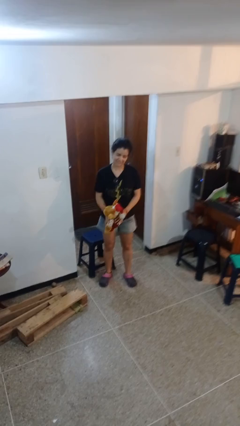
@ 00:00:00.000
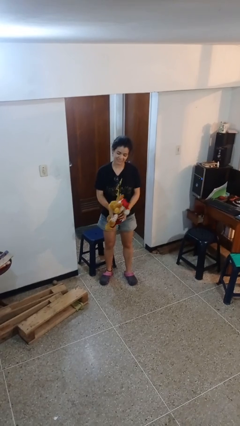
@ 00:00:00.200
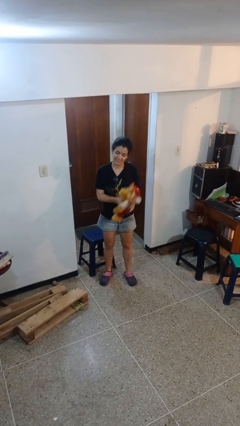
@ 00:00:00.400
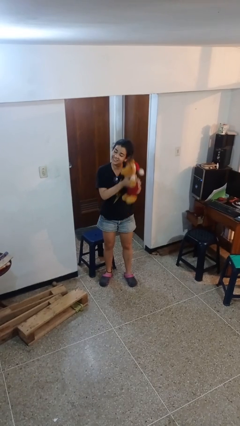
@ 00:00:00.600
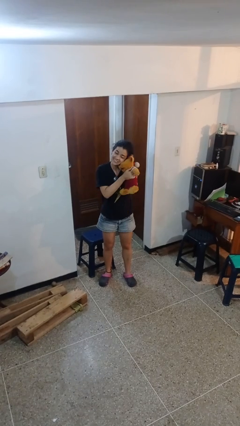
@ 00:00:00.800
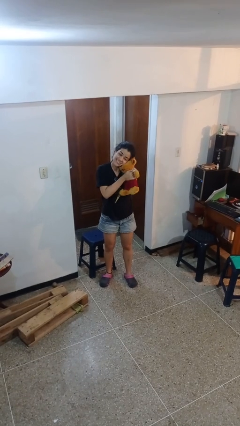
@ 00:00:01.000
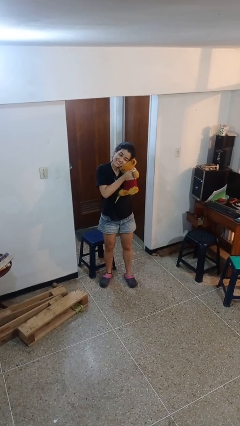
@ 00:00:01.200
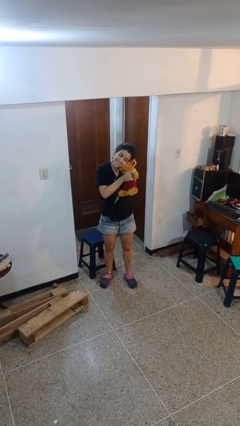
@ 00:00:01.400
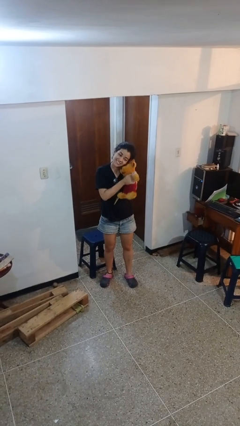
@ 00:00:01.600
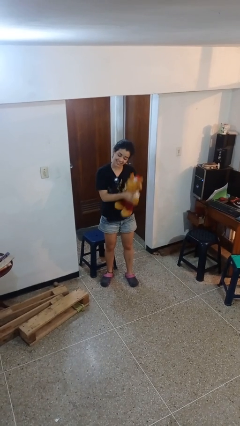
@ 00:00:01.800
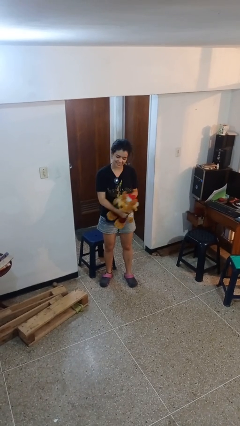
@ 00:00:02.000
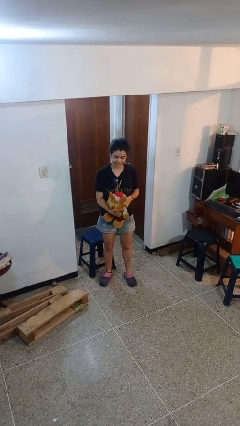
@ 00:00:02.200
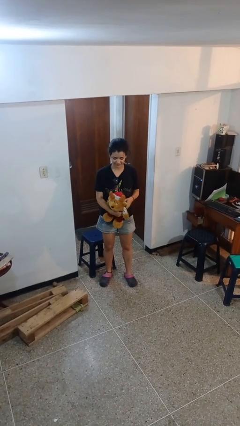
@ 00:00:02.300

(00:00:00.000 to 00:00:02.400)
person hugs stuffed animal

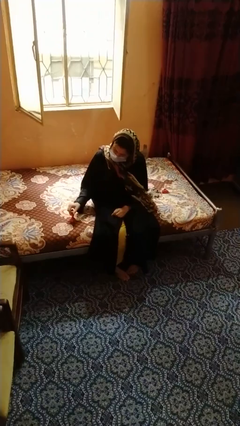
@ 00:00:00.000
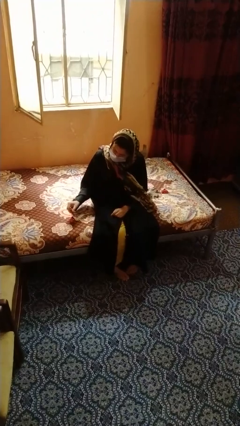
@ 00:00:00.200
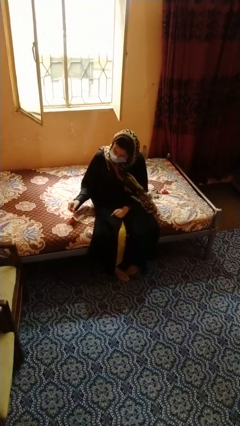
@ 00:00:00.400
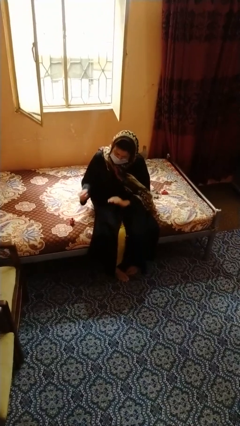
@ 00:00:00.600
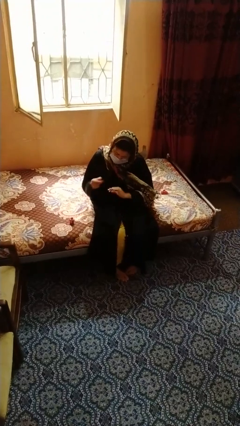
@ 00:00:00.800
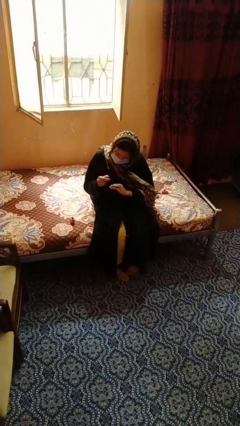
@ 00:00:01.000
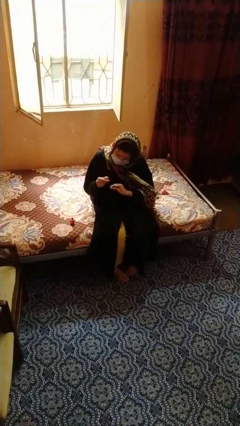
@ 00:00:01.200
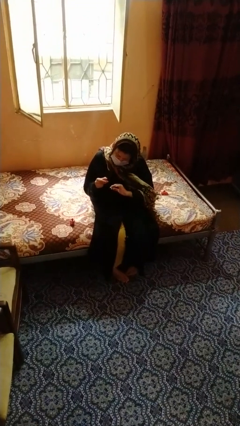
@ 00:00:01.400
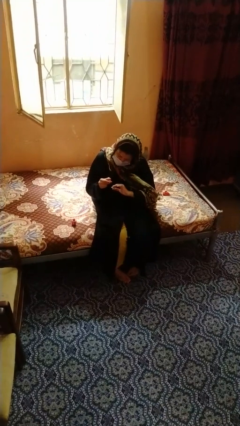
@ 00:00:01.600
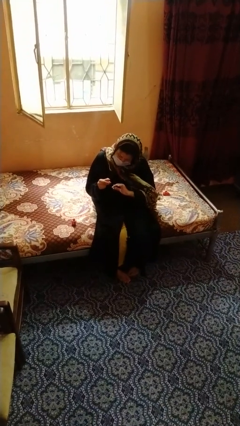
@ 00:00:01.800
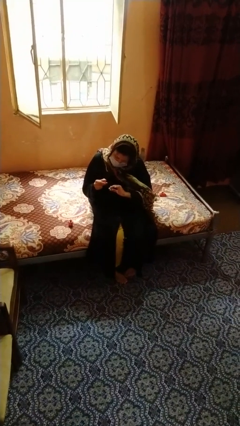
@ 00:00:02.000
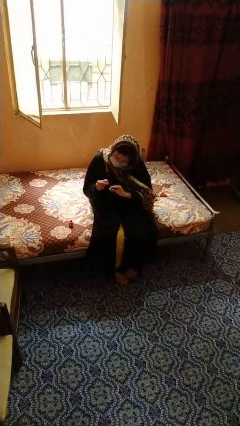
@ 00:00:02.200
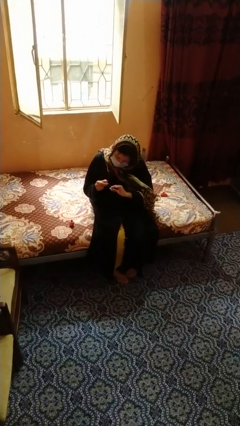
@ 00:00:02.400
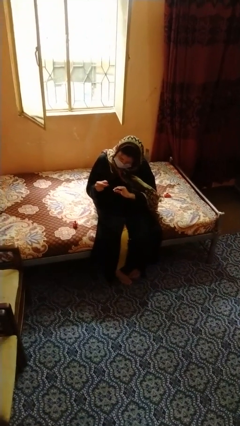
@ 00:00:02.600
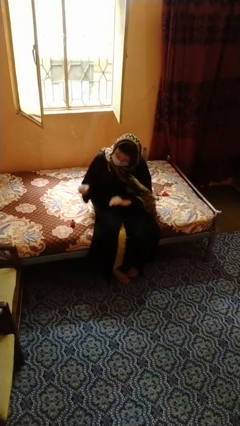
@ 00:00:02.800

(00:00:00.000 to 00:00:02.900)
person paints fingernails

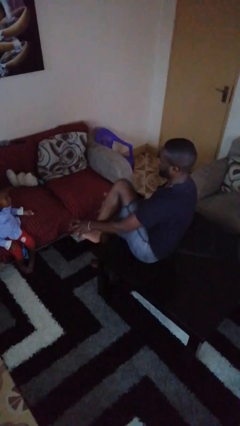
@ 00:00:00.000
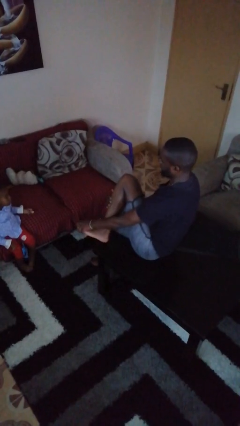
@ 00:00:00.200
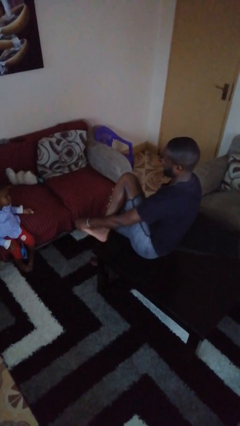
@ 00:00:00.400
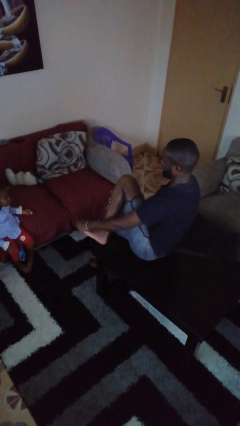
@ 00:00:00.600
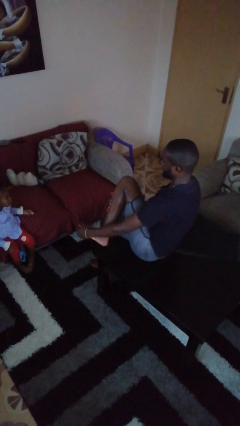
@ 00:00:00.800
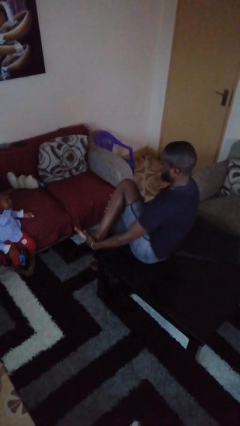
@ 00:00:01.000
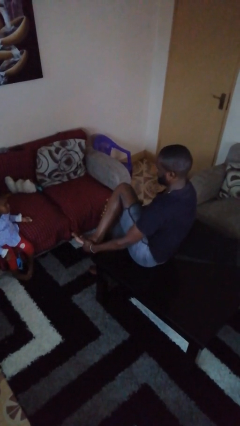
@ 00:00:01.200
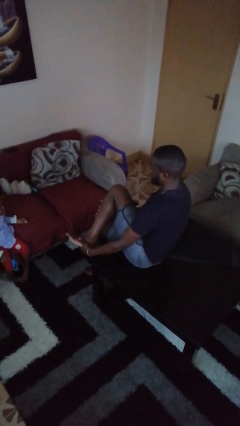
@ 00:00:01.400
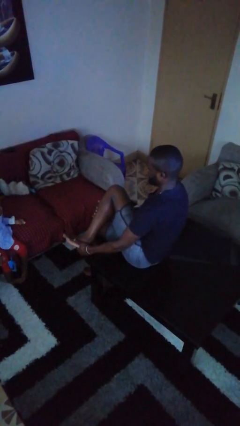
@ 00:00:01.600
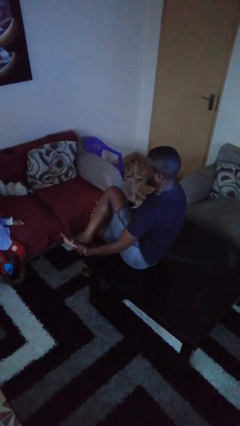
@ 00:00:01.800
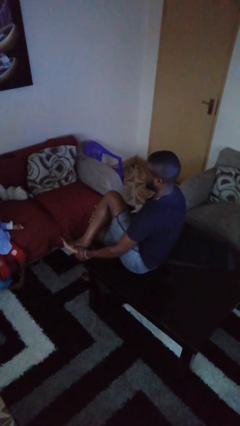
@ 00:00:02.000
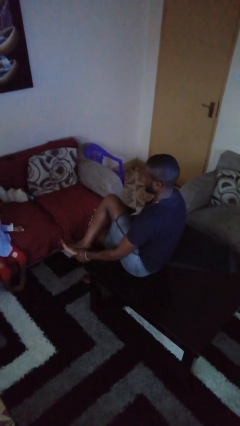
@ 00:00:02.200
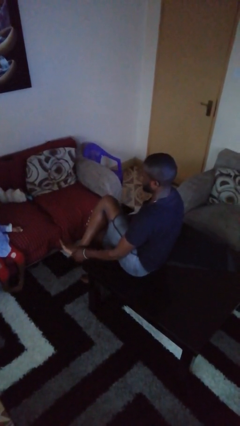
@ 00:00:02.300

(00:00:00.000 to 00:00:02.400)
person rubs foot

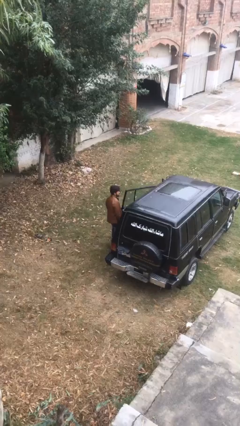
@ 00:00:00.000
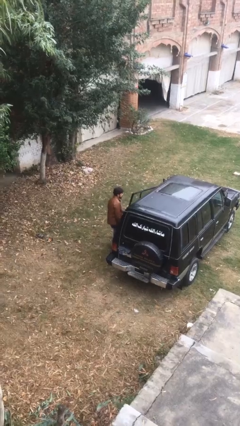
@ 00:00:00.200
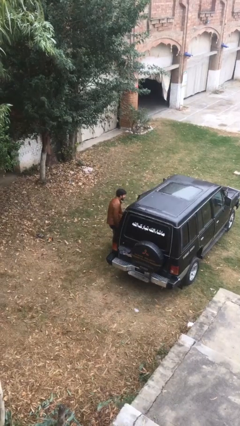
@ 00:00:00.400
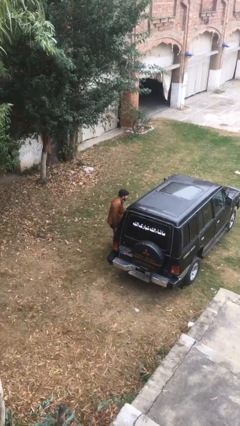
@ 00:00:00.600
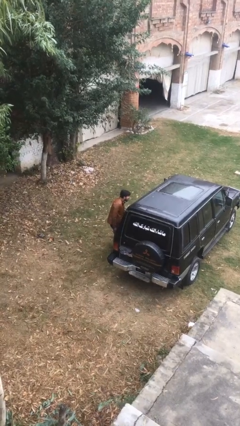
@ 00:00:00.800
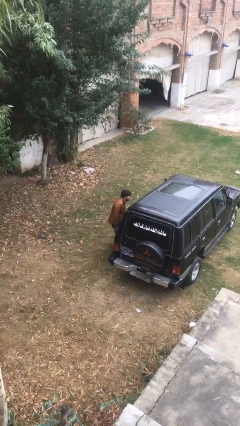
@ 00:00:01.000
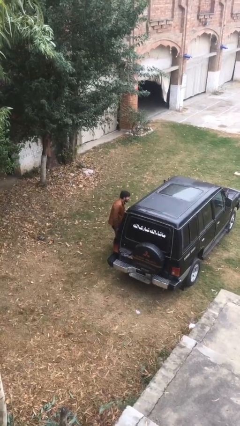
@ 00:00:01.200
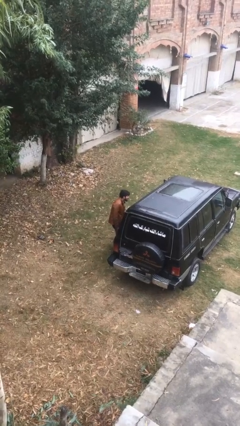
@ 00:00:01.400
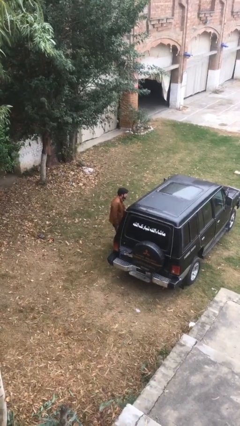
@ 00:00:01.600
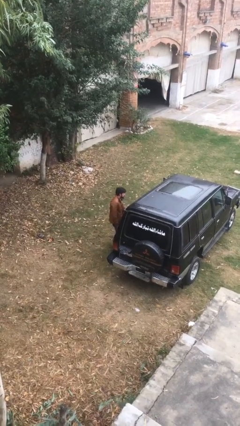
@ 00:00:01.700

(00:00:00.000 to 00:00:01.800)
person closes car door

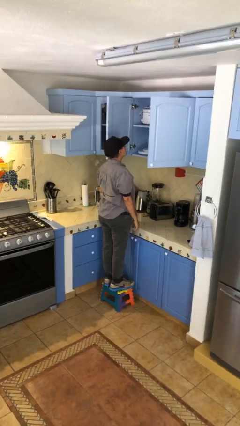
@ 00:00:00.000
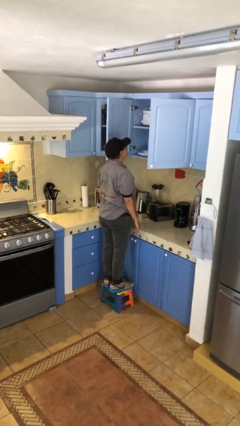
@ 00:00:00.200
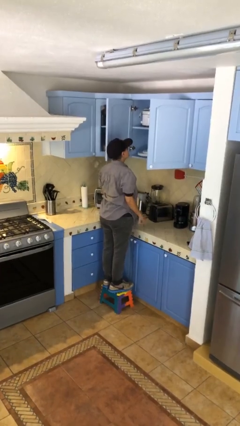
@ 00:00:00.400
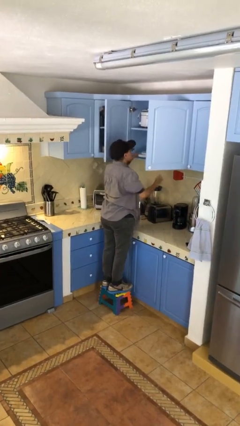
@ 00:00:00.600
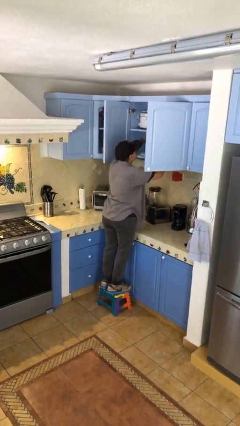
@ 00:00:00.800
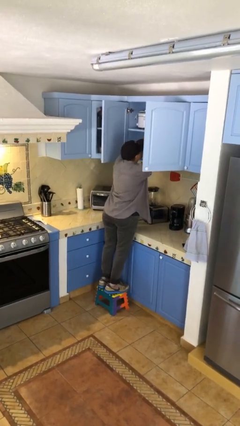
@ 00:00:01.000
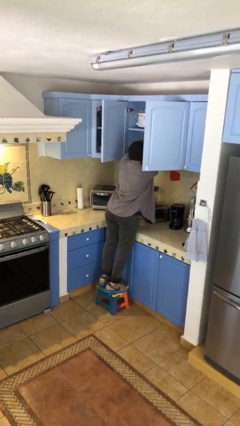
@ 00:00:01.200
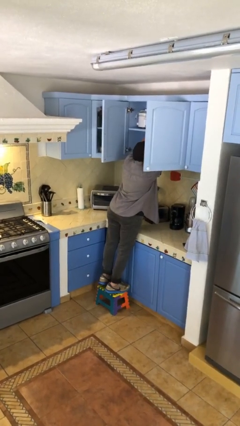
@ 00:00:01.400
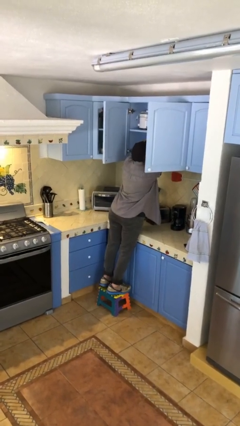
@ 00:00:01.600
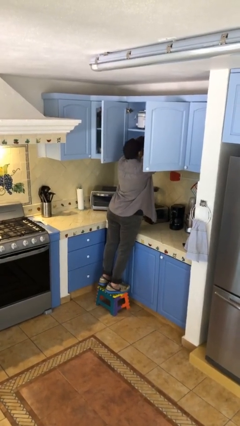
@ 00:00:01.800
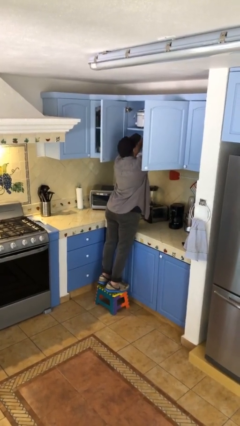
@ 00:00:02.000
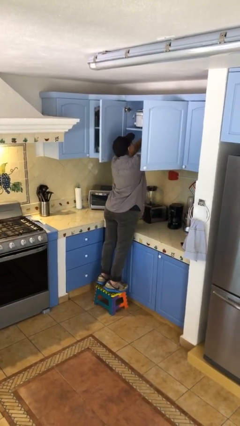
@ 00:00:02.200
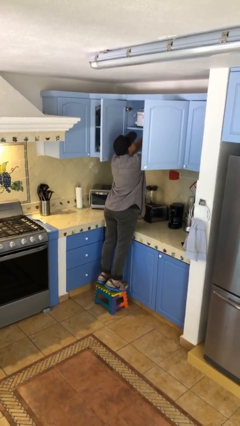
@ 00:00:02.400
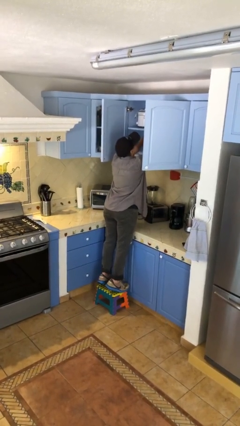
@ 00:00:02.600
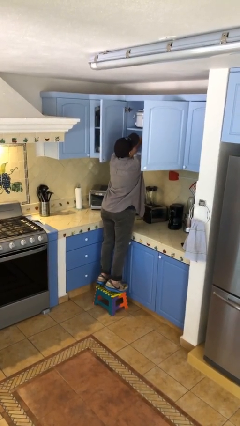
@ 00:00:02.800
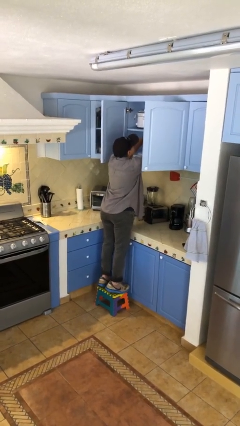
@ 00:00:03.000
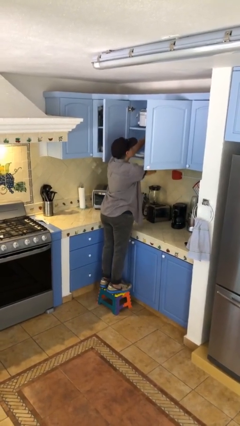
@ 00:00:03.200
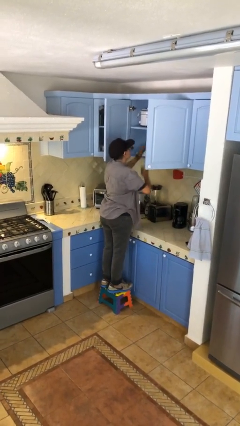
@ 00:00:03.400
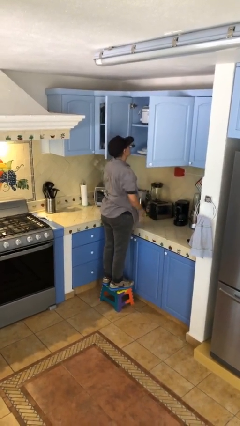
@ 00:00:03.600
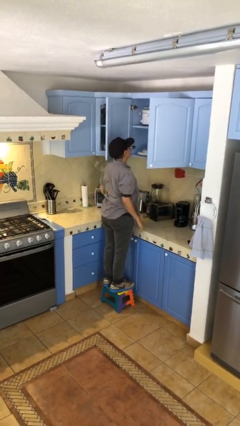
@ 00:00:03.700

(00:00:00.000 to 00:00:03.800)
person searches in cabinet

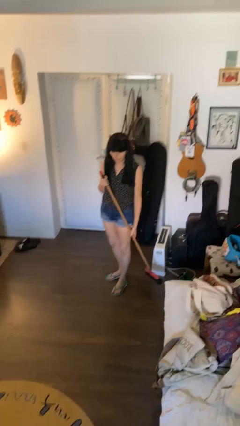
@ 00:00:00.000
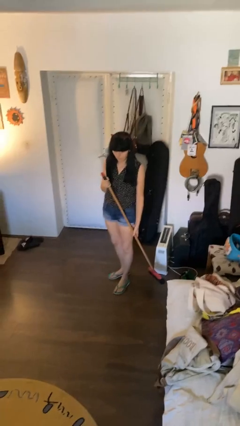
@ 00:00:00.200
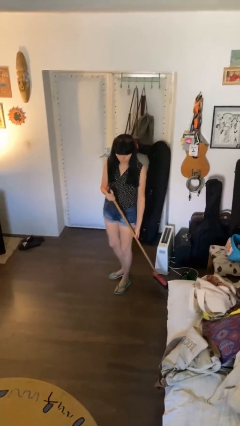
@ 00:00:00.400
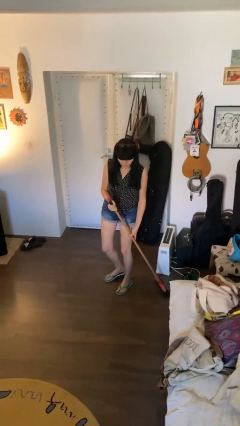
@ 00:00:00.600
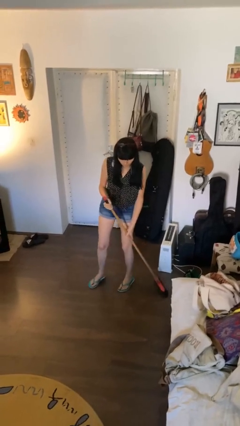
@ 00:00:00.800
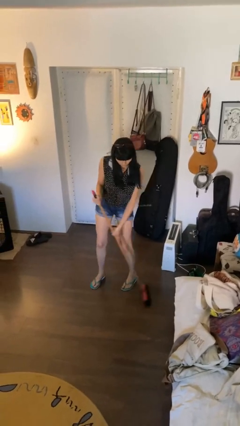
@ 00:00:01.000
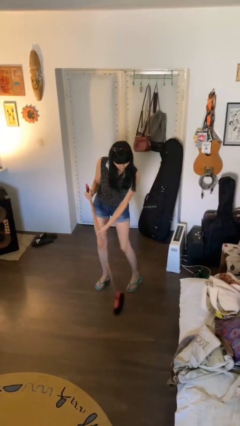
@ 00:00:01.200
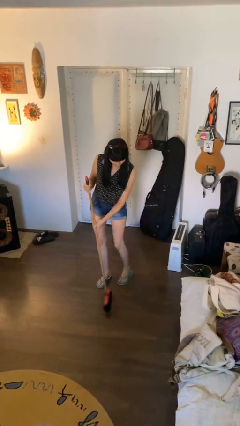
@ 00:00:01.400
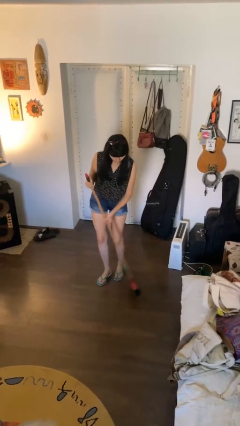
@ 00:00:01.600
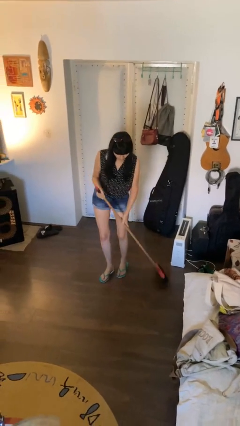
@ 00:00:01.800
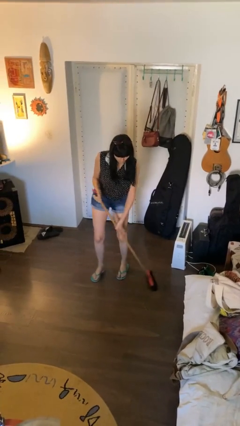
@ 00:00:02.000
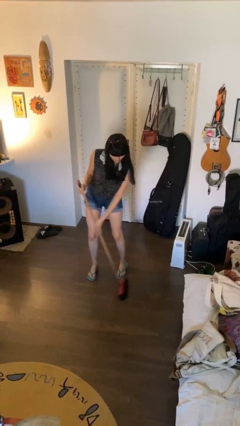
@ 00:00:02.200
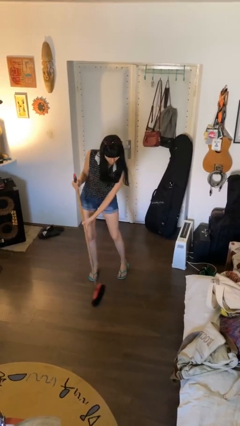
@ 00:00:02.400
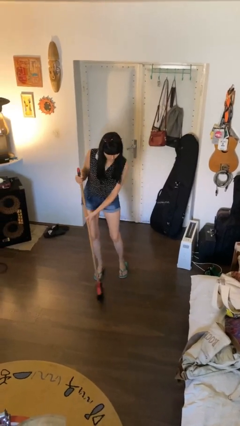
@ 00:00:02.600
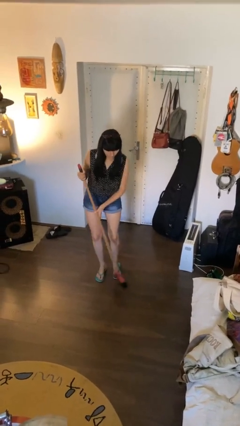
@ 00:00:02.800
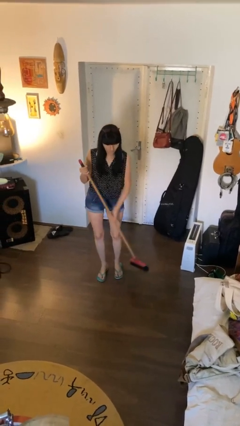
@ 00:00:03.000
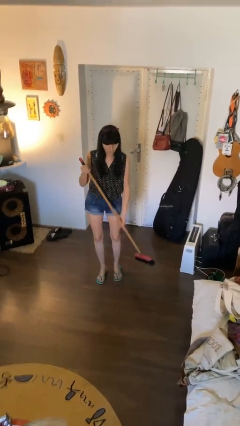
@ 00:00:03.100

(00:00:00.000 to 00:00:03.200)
person sweeps floor

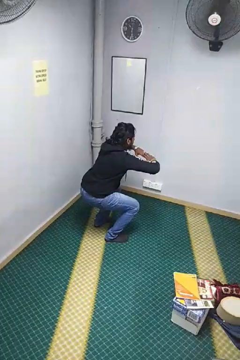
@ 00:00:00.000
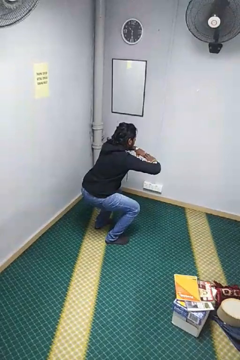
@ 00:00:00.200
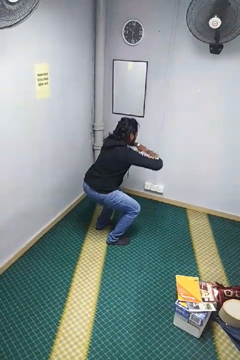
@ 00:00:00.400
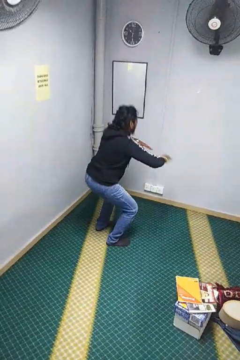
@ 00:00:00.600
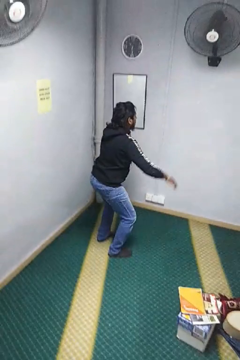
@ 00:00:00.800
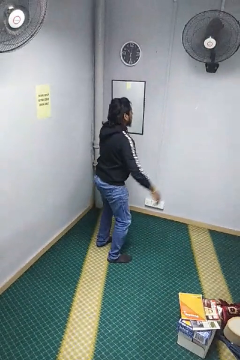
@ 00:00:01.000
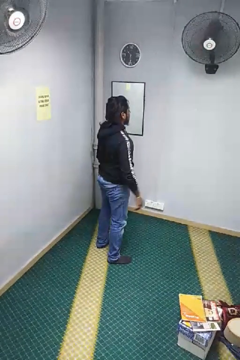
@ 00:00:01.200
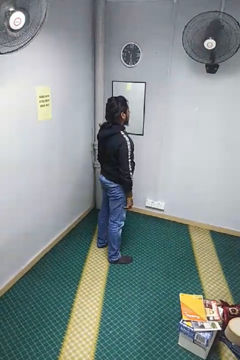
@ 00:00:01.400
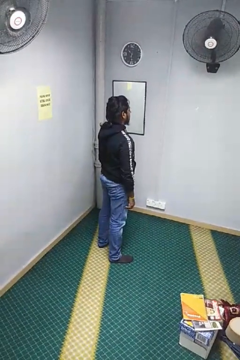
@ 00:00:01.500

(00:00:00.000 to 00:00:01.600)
person stands up
